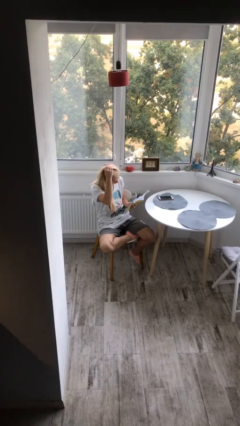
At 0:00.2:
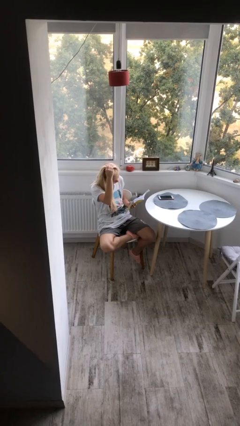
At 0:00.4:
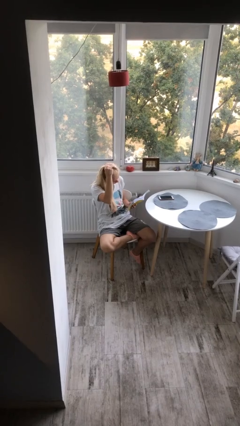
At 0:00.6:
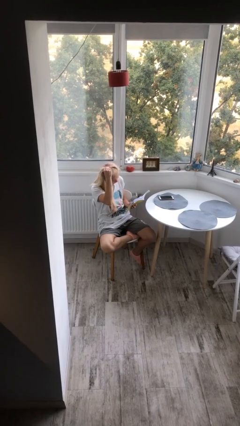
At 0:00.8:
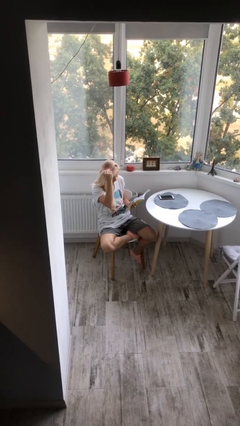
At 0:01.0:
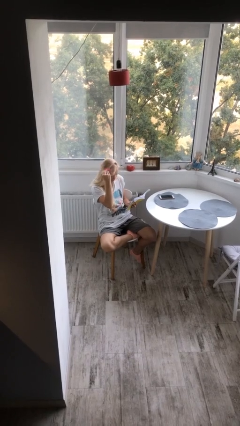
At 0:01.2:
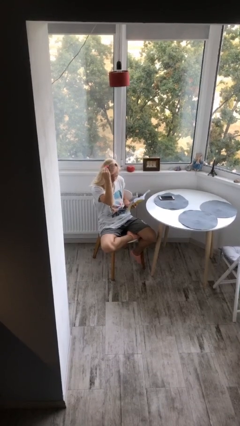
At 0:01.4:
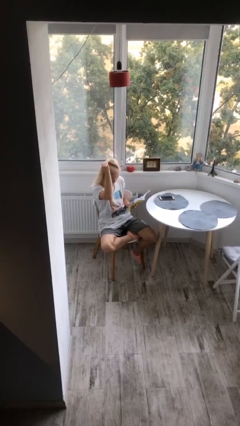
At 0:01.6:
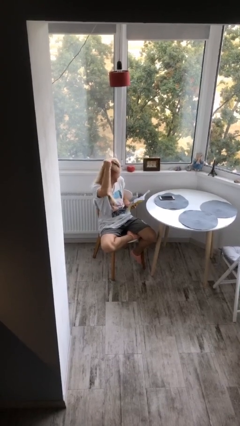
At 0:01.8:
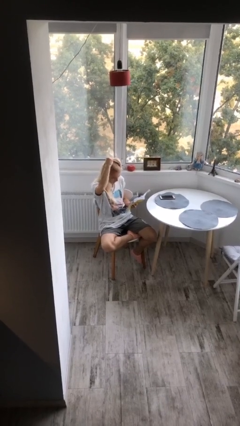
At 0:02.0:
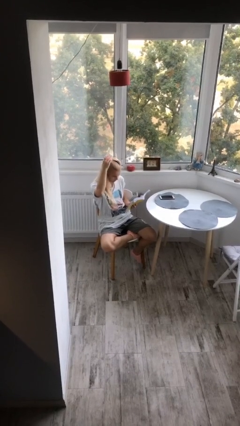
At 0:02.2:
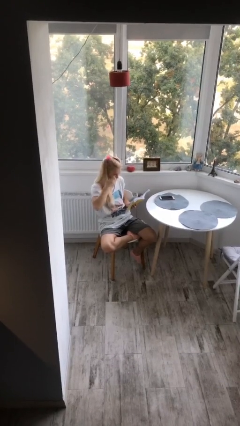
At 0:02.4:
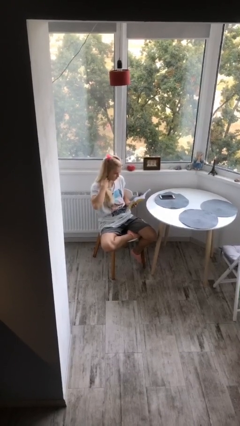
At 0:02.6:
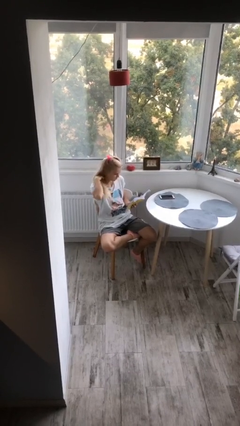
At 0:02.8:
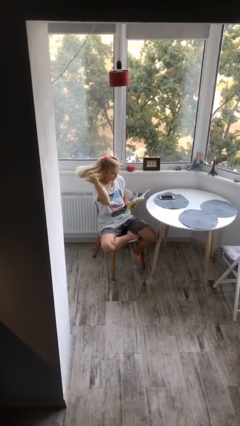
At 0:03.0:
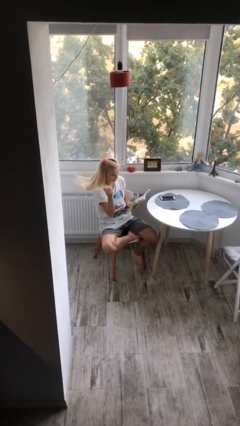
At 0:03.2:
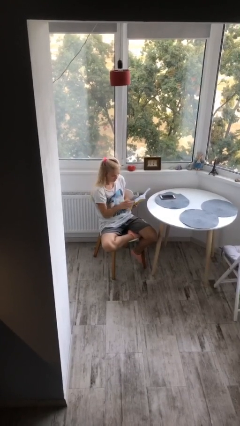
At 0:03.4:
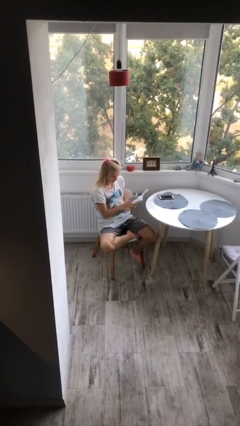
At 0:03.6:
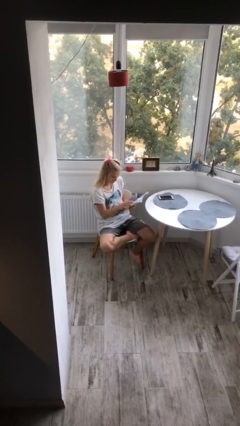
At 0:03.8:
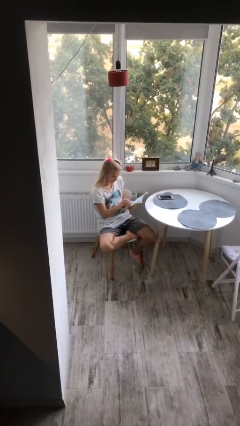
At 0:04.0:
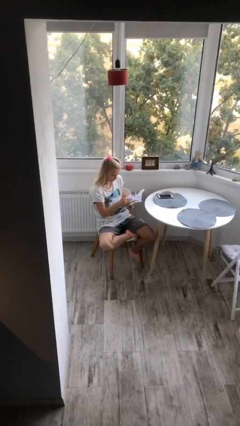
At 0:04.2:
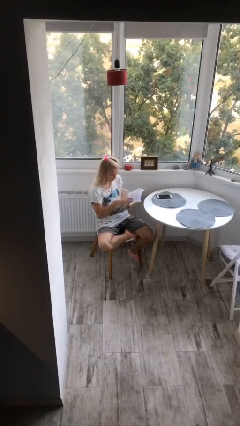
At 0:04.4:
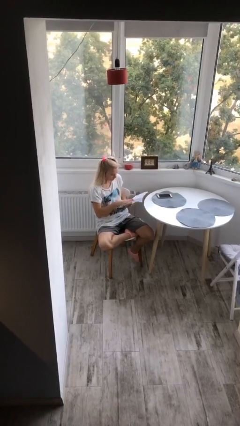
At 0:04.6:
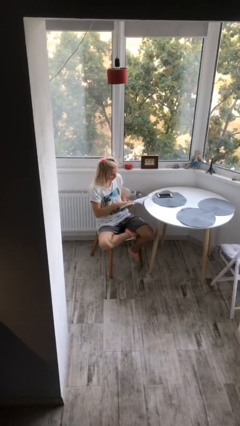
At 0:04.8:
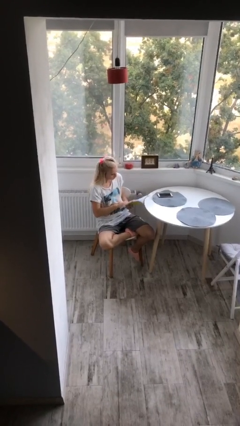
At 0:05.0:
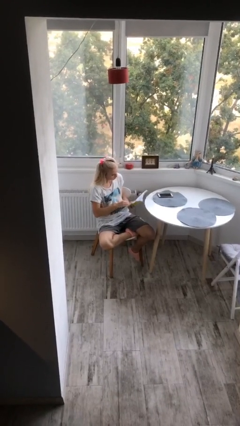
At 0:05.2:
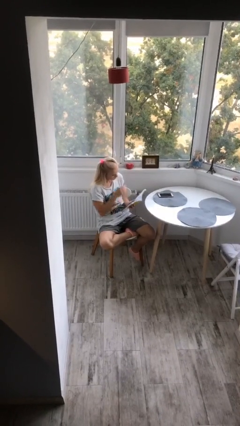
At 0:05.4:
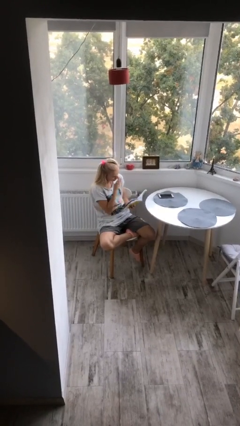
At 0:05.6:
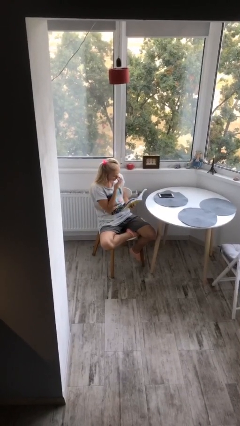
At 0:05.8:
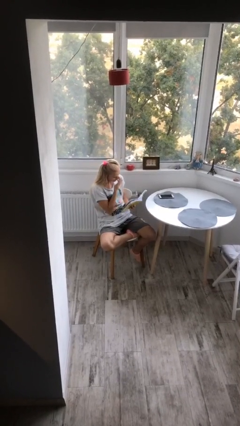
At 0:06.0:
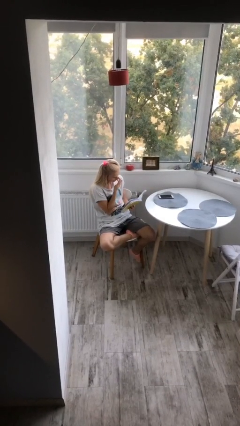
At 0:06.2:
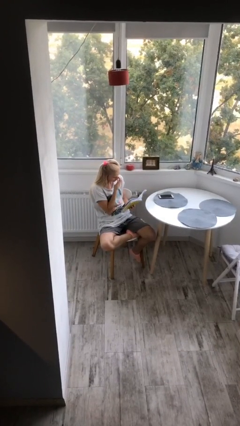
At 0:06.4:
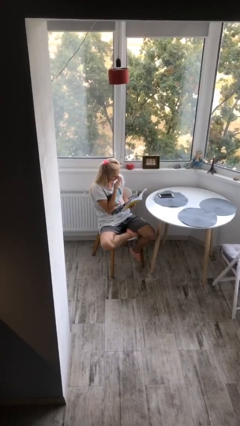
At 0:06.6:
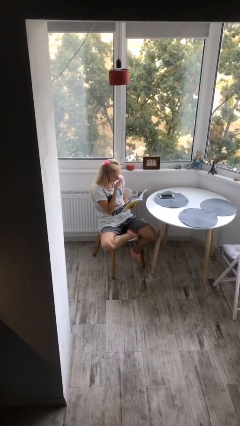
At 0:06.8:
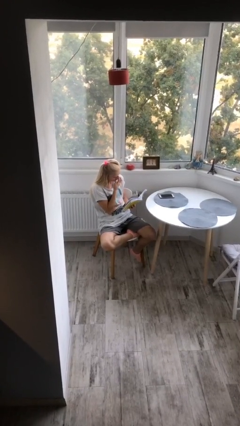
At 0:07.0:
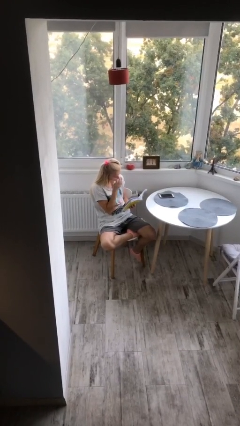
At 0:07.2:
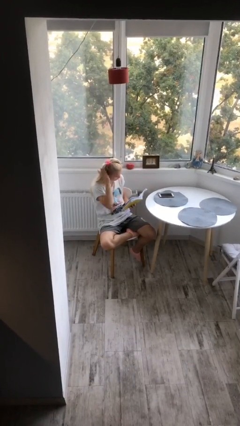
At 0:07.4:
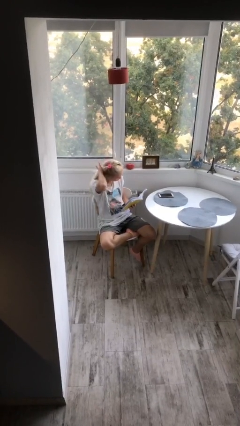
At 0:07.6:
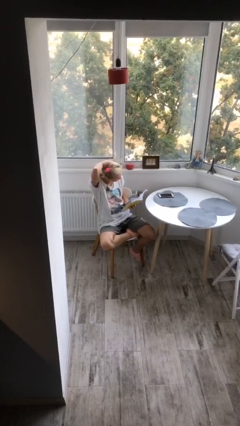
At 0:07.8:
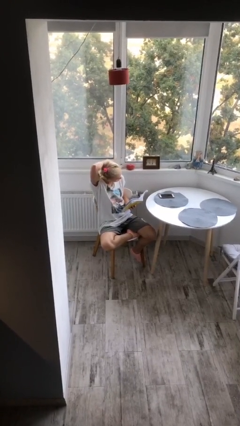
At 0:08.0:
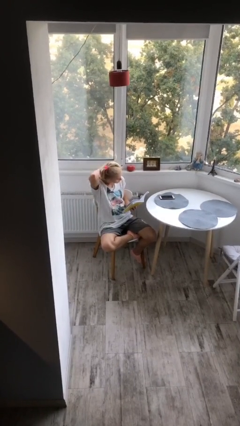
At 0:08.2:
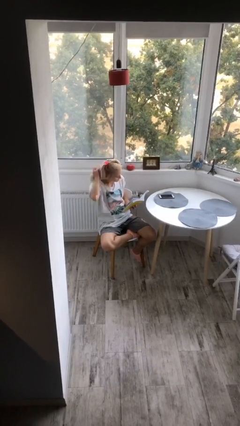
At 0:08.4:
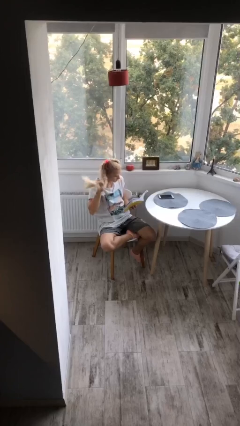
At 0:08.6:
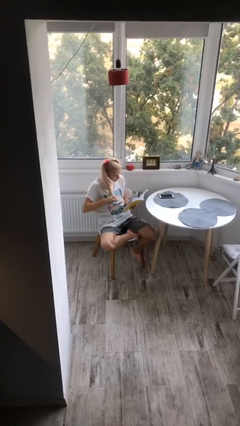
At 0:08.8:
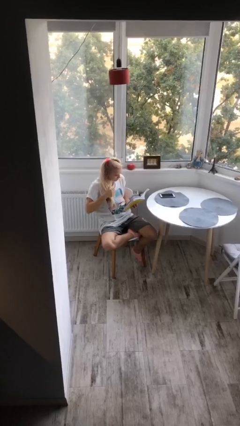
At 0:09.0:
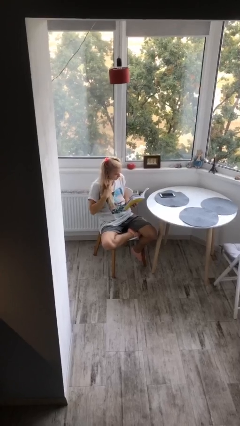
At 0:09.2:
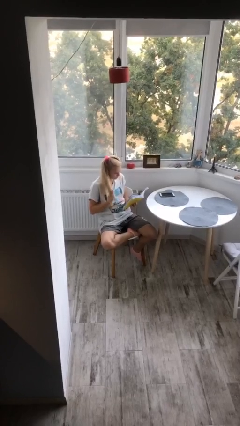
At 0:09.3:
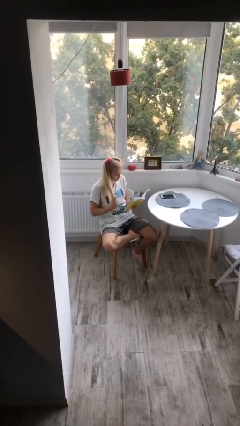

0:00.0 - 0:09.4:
person reads document

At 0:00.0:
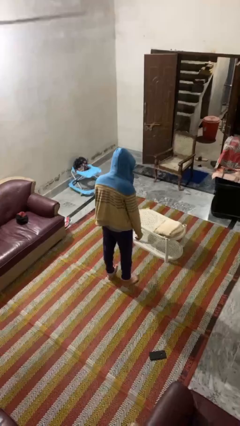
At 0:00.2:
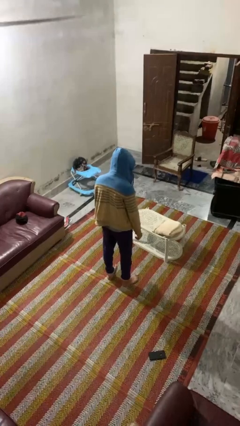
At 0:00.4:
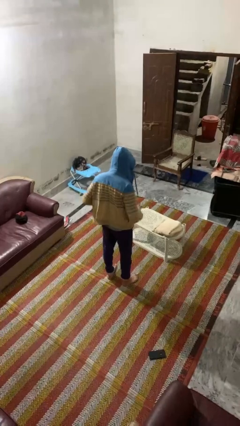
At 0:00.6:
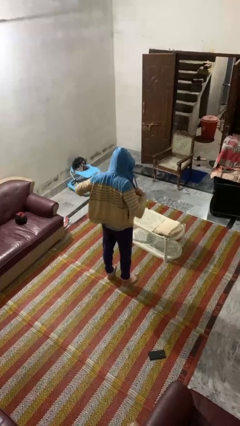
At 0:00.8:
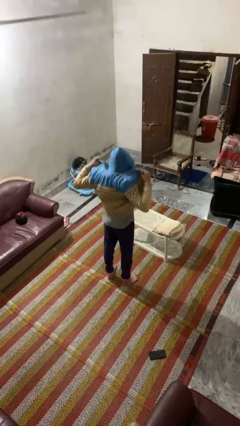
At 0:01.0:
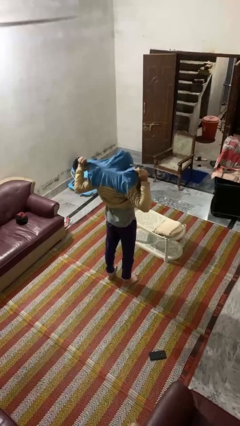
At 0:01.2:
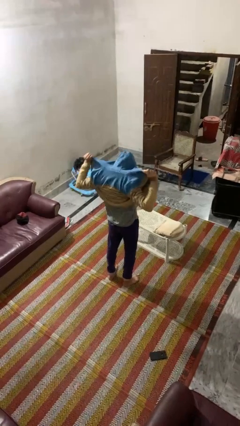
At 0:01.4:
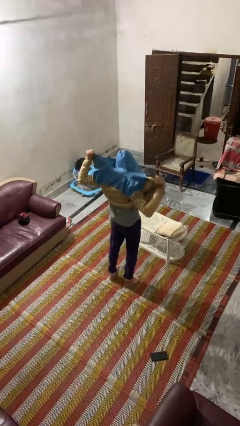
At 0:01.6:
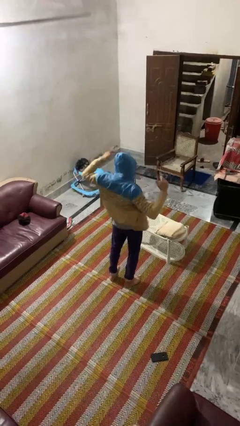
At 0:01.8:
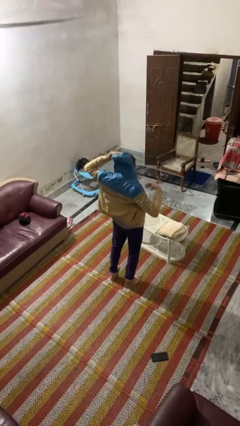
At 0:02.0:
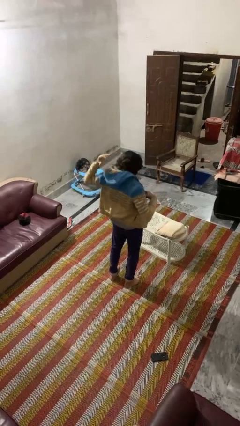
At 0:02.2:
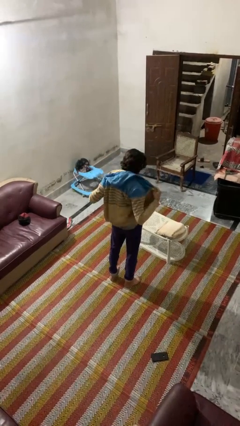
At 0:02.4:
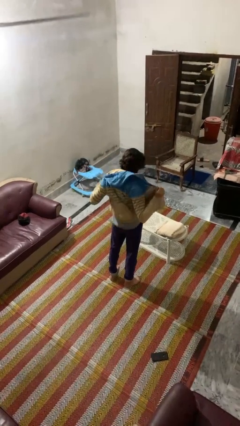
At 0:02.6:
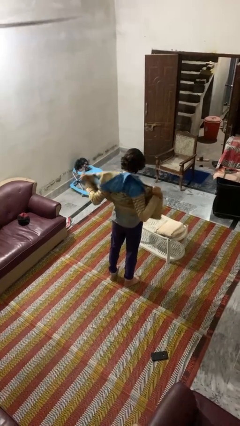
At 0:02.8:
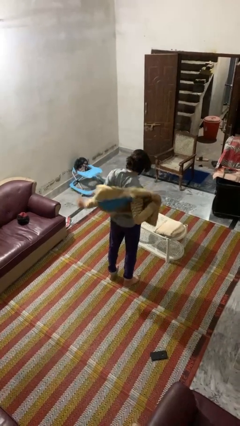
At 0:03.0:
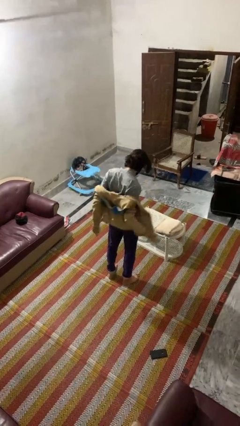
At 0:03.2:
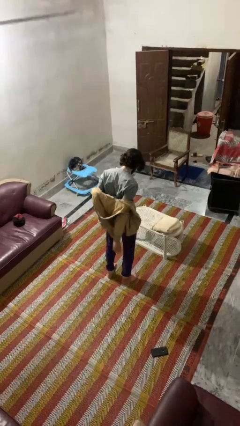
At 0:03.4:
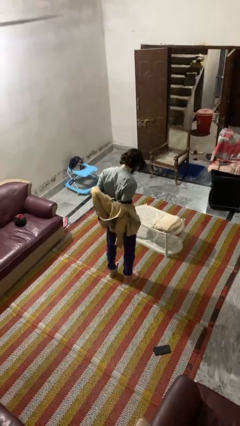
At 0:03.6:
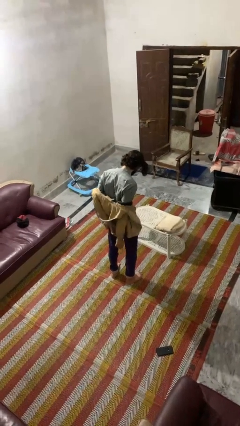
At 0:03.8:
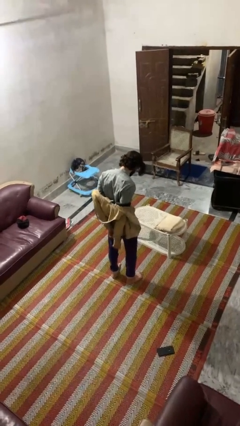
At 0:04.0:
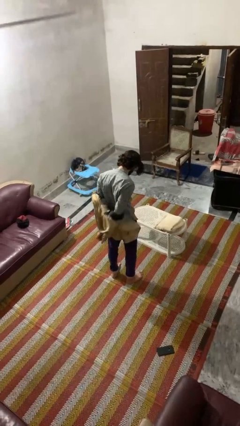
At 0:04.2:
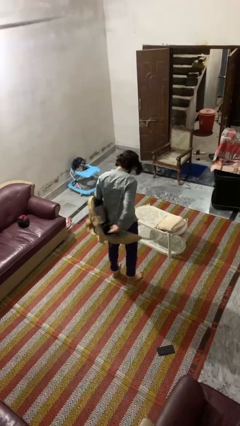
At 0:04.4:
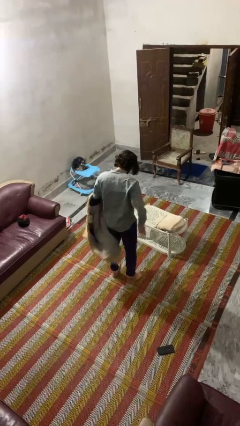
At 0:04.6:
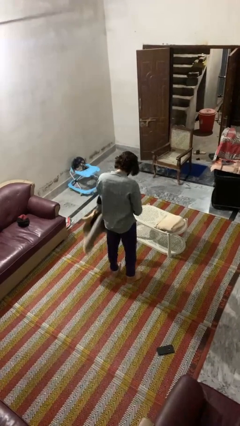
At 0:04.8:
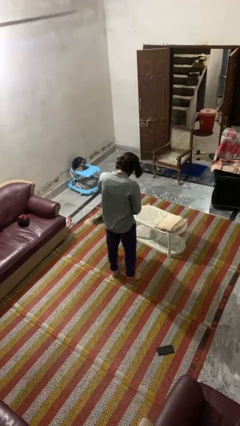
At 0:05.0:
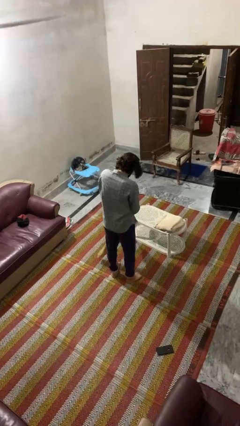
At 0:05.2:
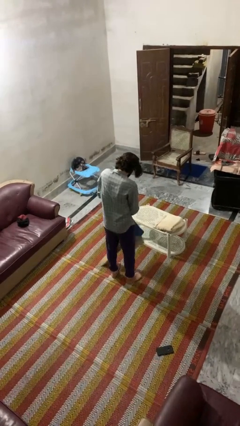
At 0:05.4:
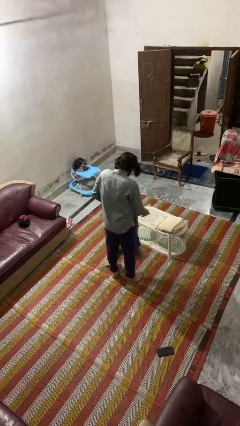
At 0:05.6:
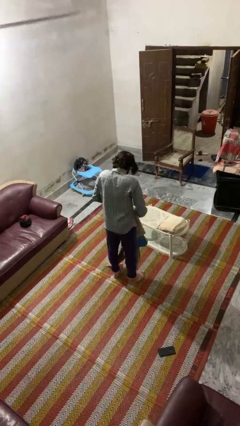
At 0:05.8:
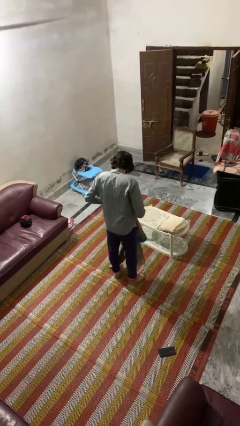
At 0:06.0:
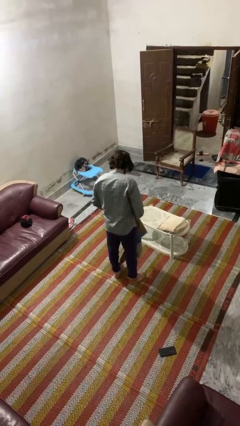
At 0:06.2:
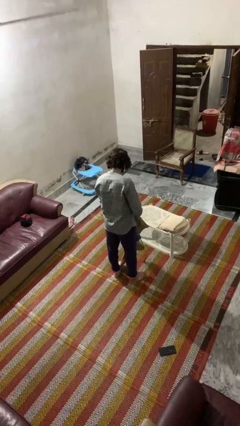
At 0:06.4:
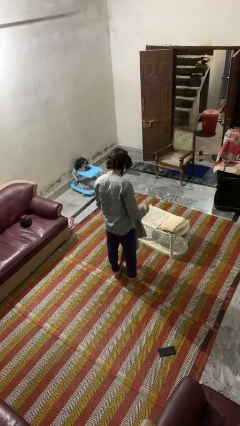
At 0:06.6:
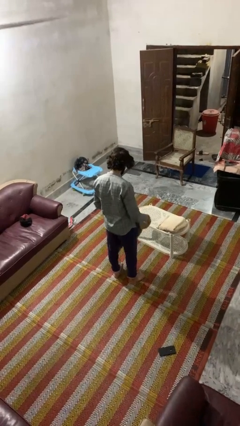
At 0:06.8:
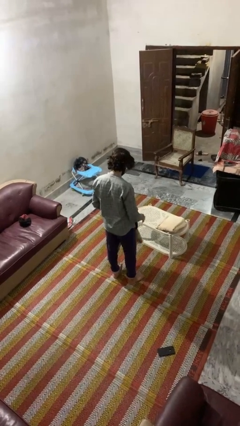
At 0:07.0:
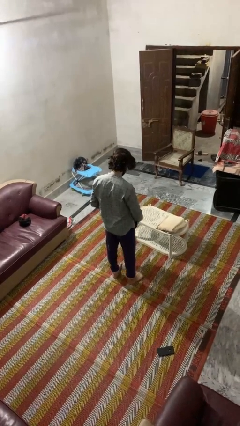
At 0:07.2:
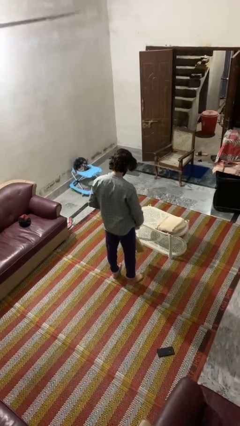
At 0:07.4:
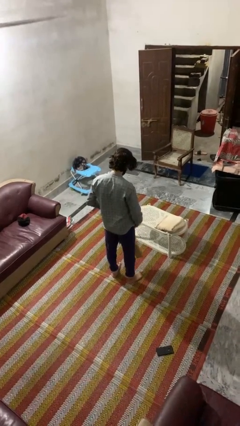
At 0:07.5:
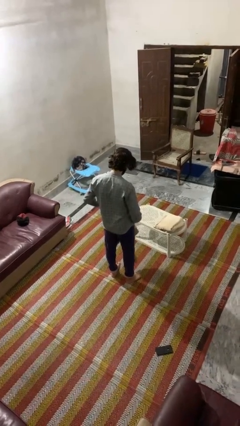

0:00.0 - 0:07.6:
person takes off hoodie

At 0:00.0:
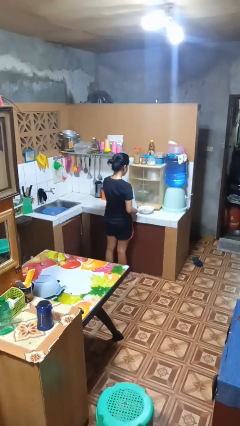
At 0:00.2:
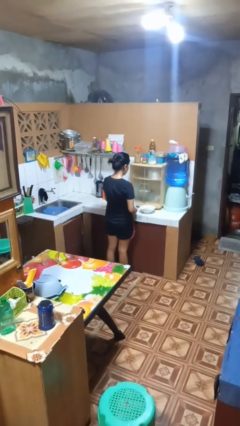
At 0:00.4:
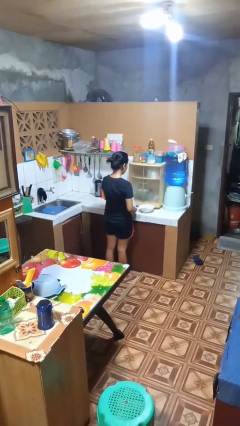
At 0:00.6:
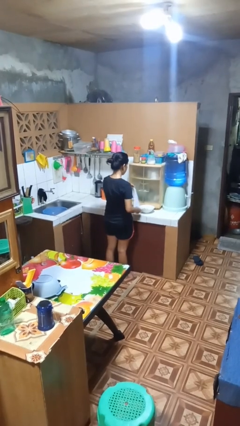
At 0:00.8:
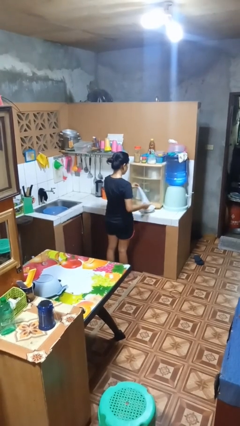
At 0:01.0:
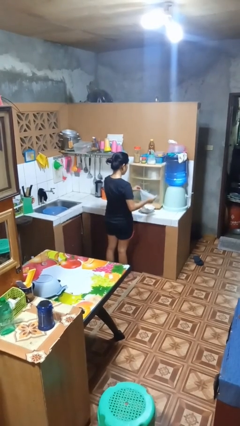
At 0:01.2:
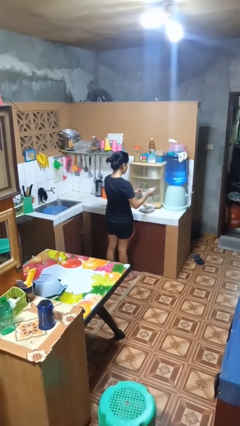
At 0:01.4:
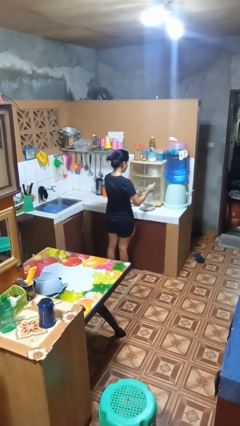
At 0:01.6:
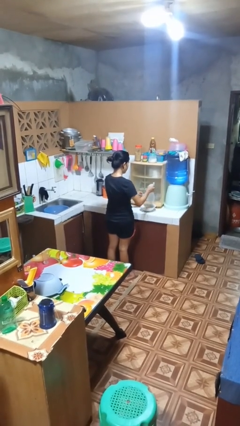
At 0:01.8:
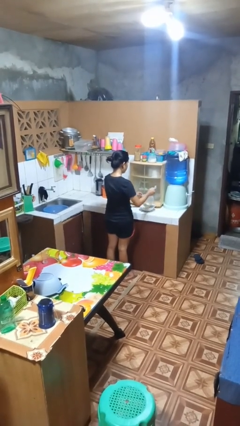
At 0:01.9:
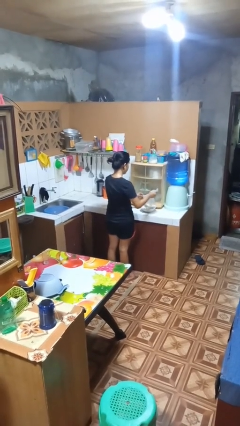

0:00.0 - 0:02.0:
person pours into bowl
